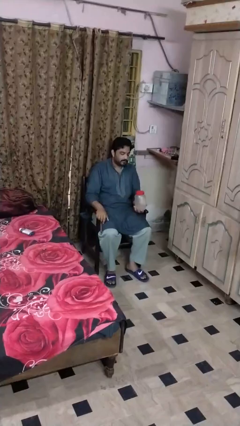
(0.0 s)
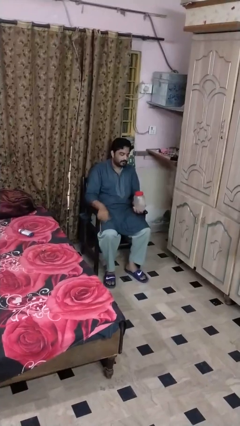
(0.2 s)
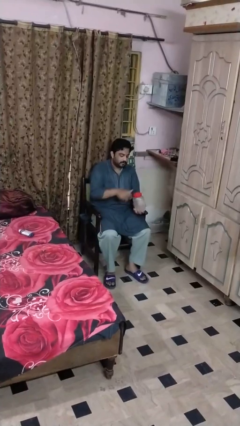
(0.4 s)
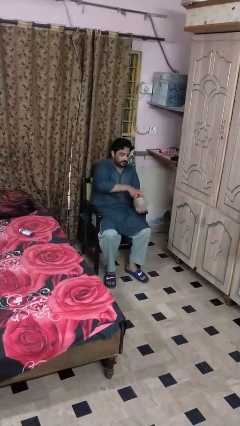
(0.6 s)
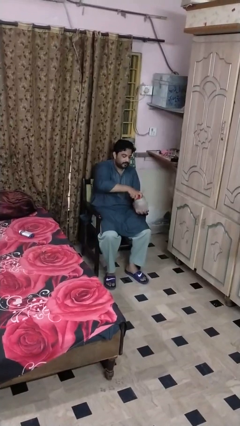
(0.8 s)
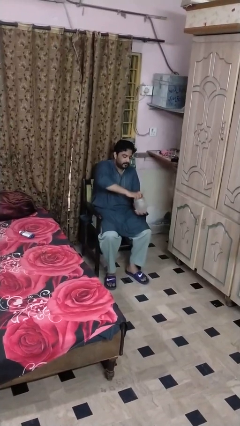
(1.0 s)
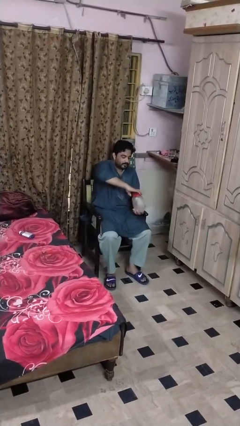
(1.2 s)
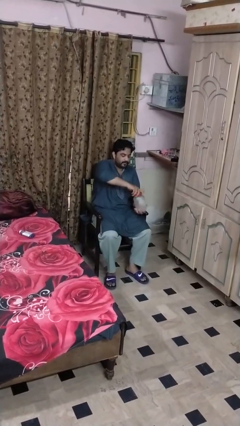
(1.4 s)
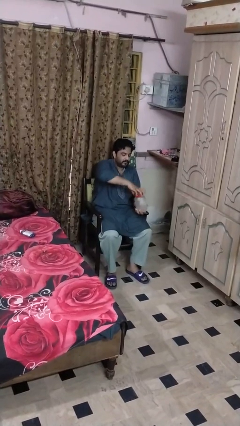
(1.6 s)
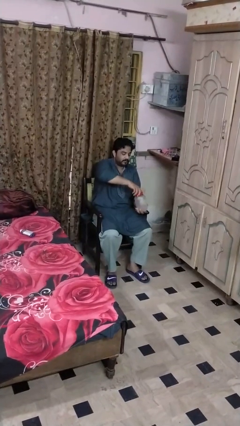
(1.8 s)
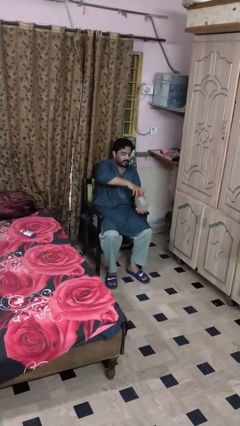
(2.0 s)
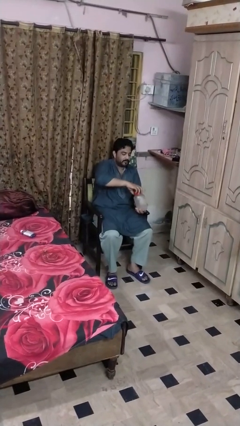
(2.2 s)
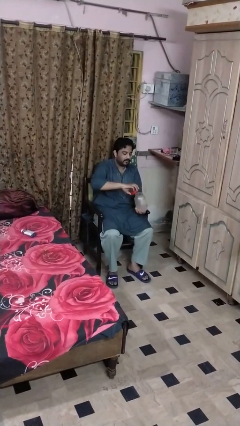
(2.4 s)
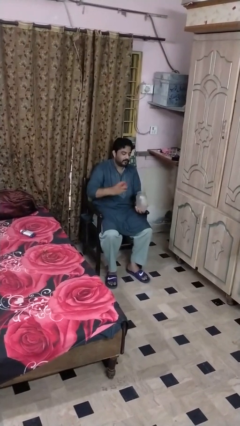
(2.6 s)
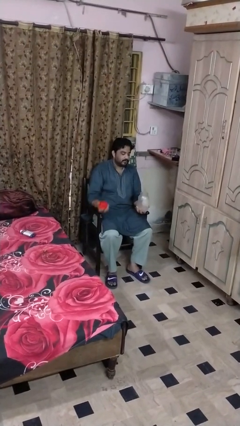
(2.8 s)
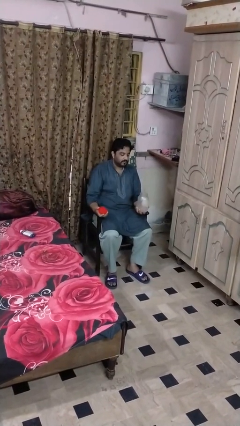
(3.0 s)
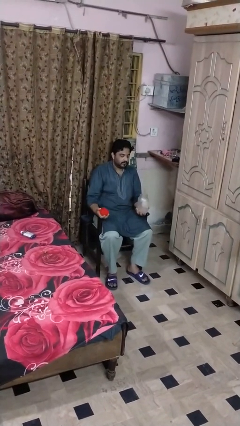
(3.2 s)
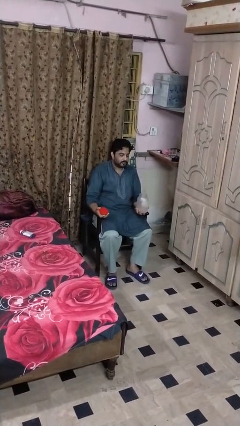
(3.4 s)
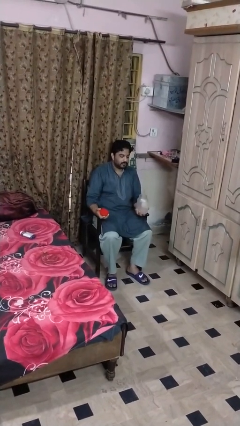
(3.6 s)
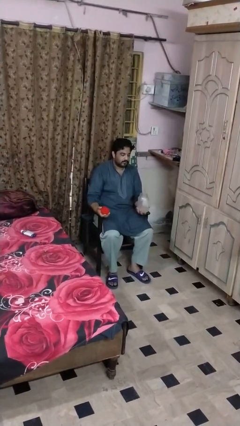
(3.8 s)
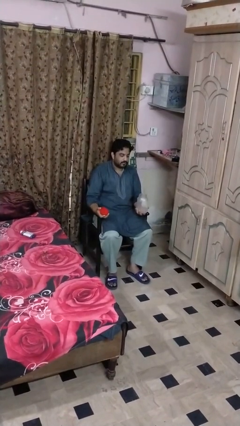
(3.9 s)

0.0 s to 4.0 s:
person opens jar

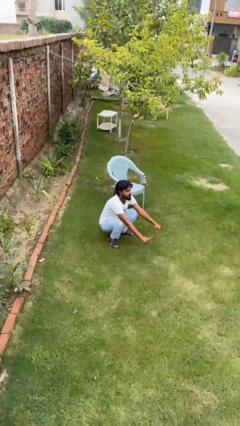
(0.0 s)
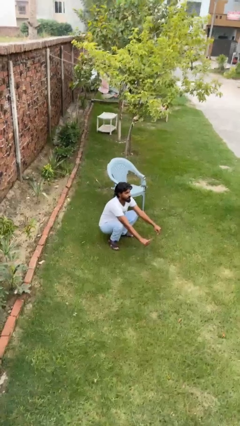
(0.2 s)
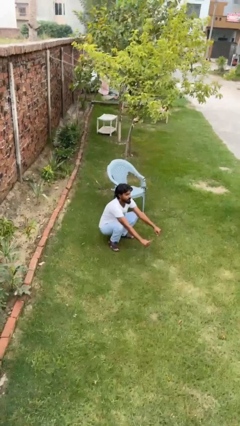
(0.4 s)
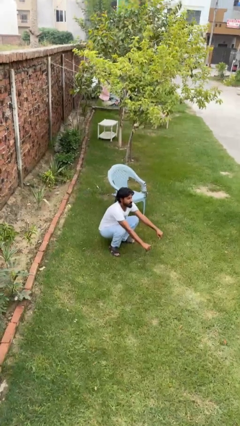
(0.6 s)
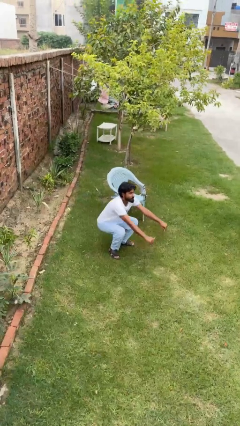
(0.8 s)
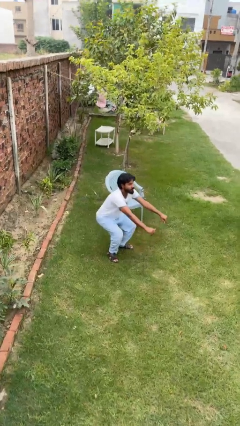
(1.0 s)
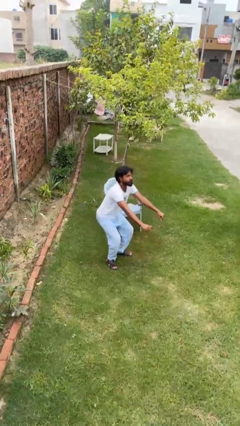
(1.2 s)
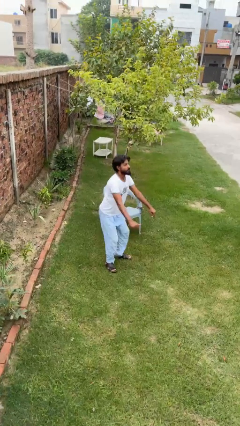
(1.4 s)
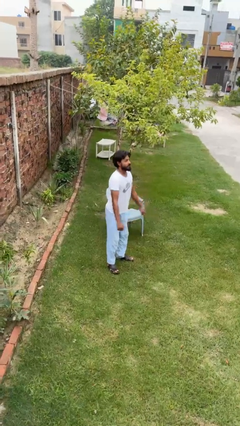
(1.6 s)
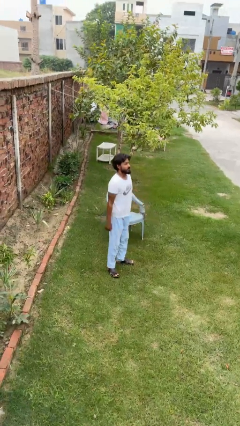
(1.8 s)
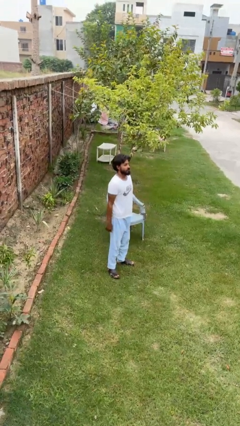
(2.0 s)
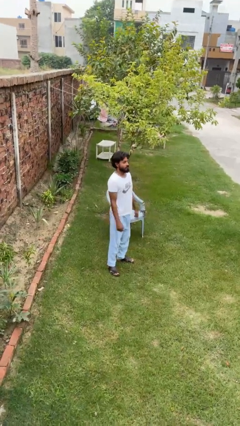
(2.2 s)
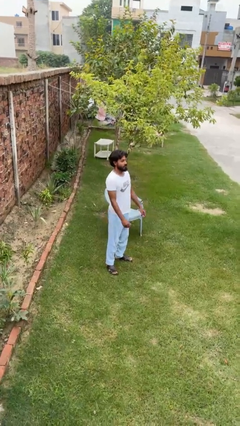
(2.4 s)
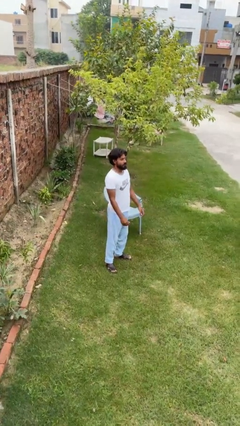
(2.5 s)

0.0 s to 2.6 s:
person stands up

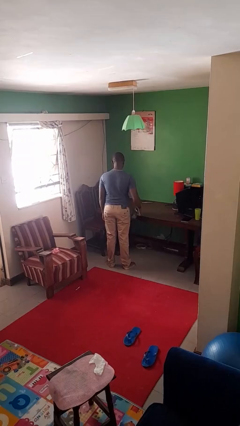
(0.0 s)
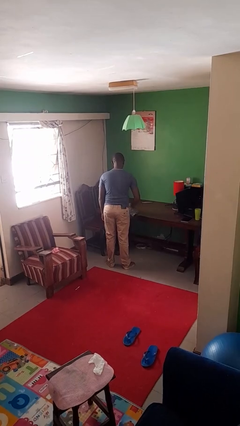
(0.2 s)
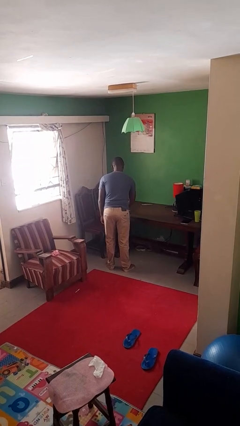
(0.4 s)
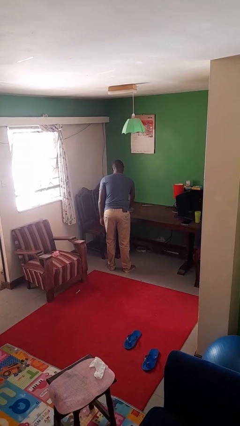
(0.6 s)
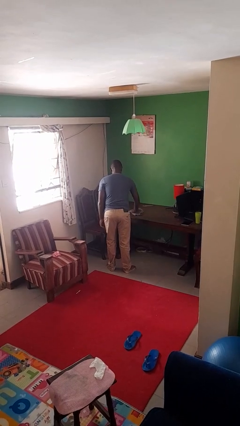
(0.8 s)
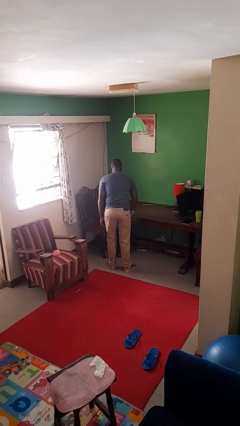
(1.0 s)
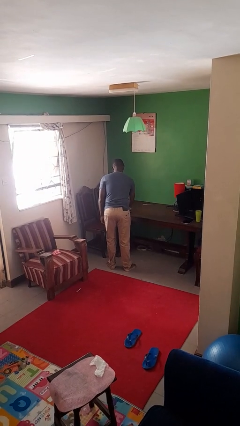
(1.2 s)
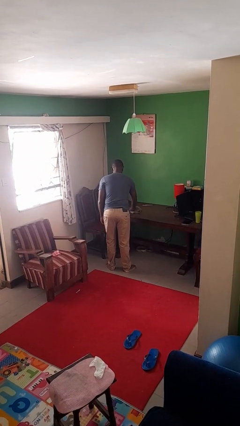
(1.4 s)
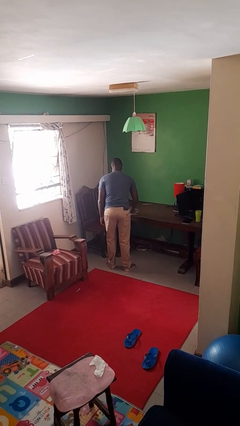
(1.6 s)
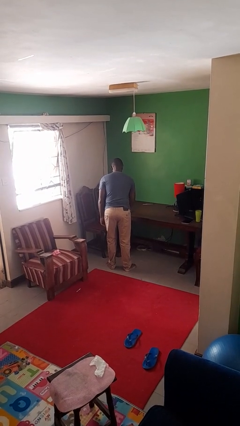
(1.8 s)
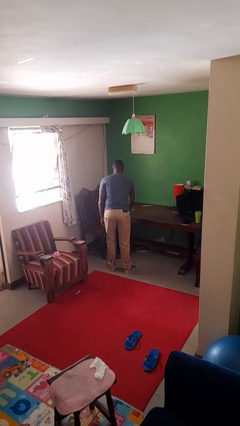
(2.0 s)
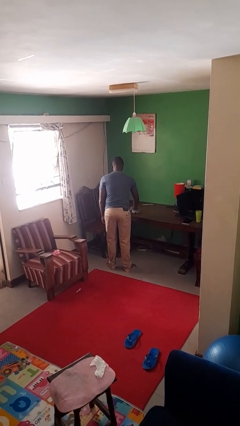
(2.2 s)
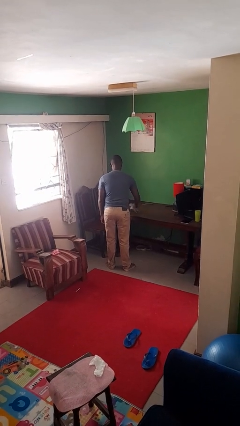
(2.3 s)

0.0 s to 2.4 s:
person cleans table with rag

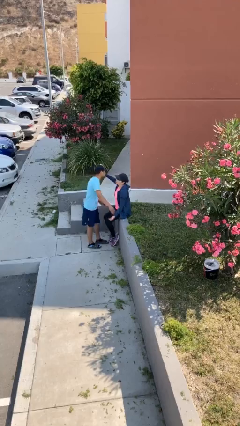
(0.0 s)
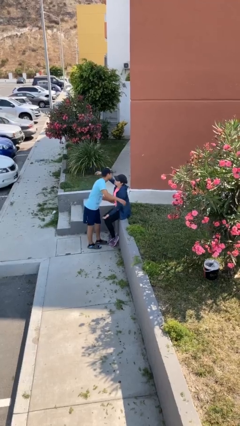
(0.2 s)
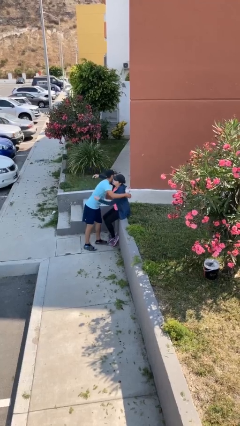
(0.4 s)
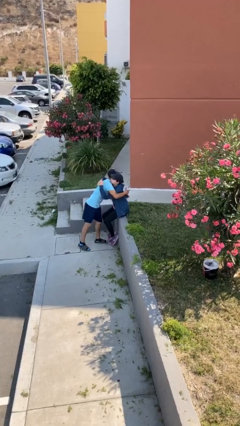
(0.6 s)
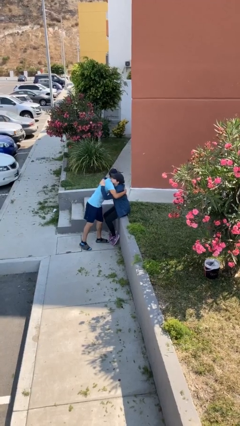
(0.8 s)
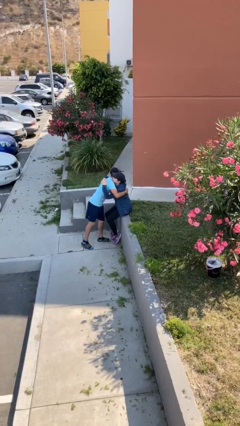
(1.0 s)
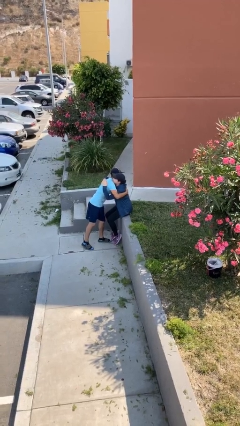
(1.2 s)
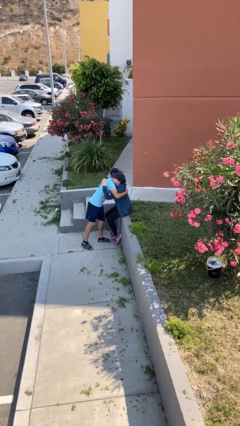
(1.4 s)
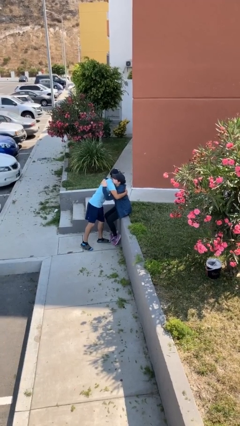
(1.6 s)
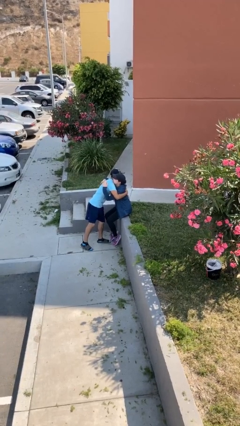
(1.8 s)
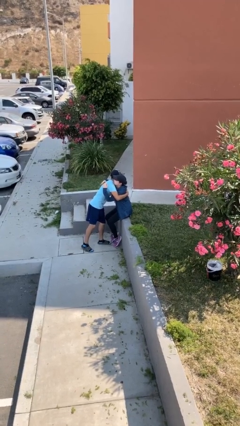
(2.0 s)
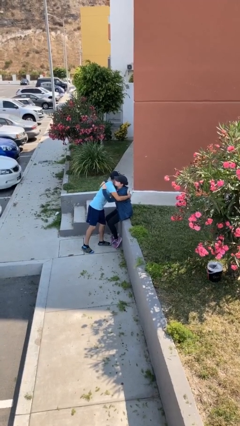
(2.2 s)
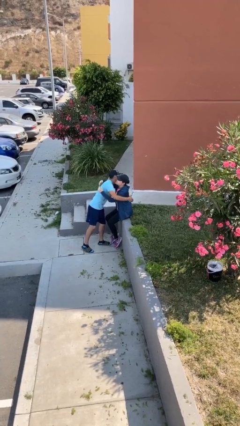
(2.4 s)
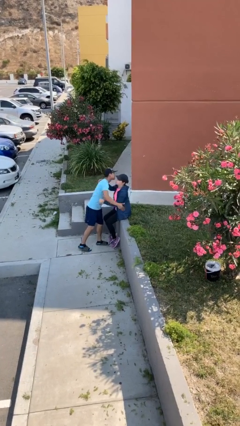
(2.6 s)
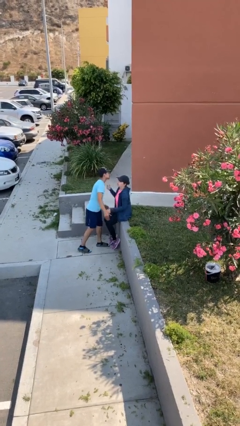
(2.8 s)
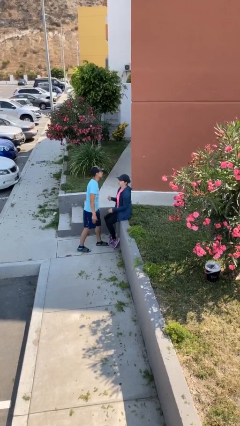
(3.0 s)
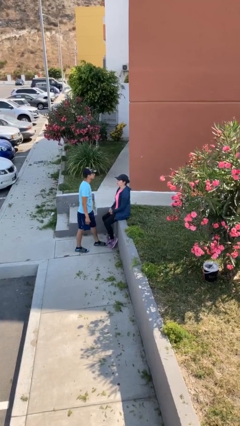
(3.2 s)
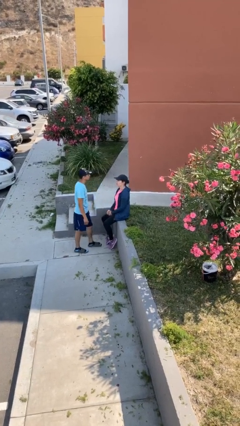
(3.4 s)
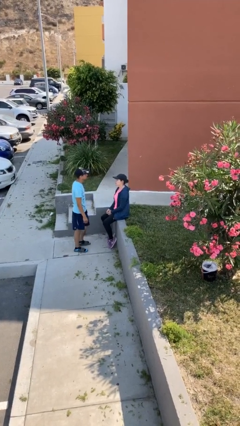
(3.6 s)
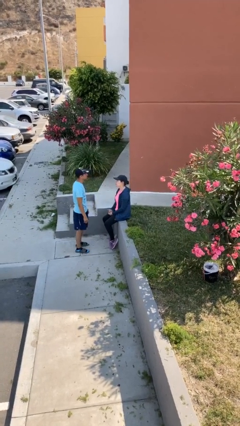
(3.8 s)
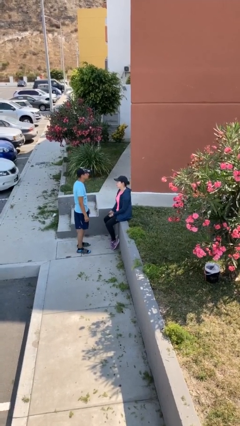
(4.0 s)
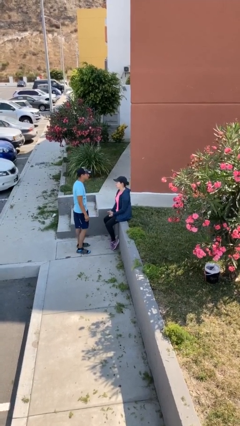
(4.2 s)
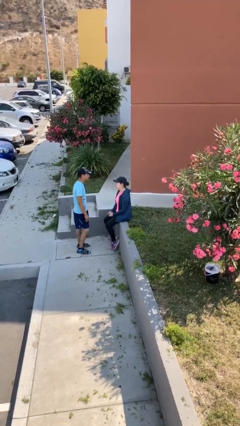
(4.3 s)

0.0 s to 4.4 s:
person embraces person

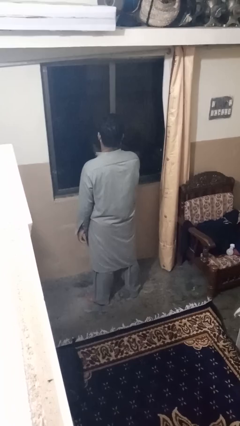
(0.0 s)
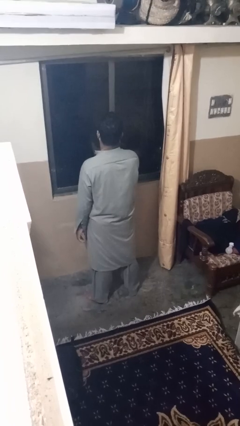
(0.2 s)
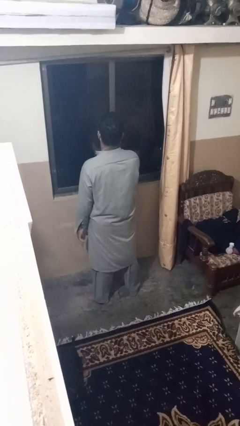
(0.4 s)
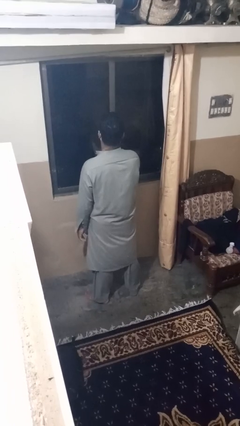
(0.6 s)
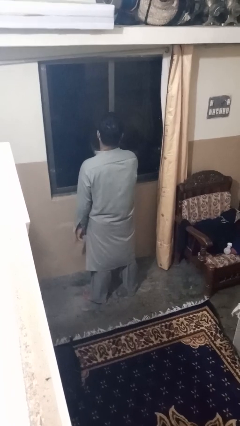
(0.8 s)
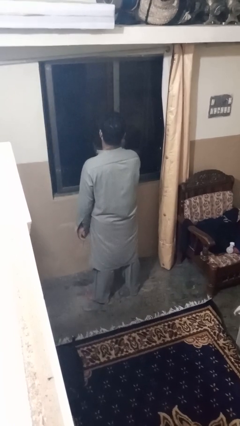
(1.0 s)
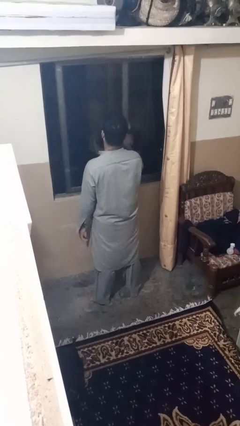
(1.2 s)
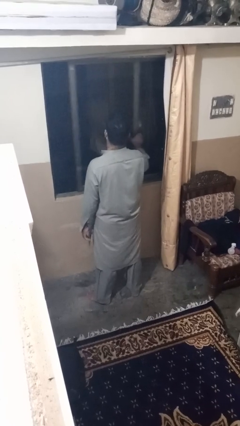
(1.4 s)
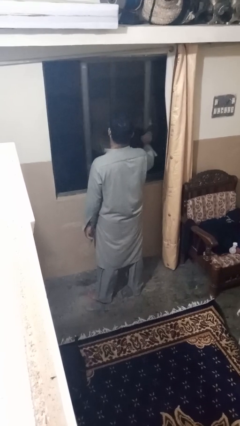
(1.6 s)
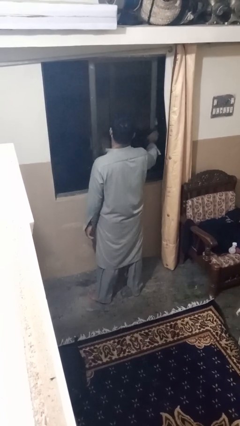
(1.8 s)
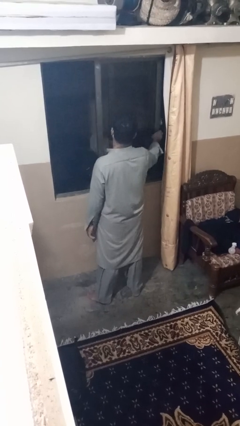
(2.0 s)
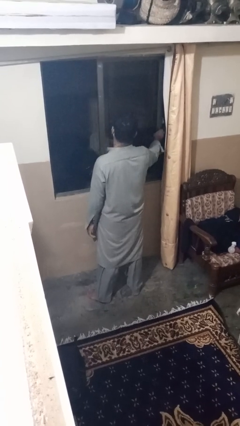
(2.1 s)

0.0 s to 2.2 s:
person opens home window

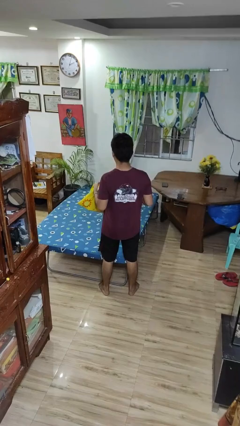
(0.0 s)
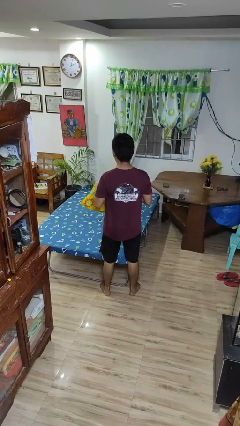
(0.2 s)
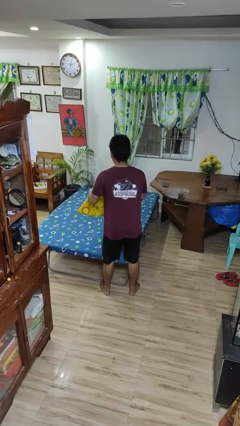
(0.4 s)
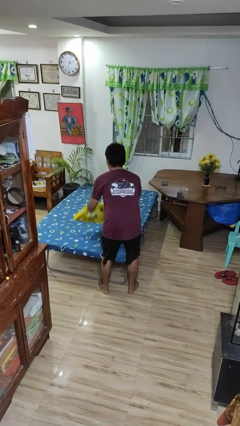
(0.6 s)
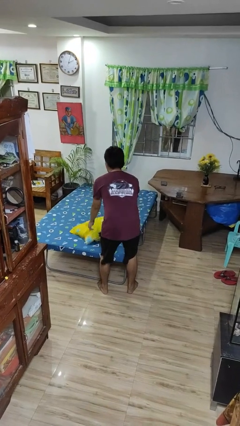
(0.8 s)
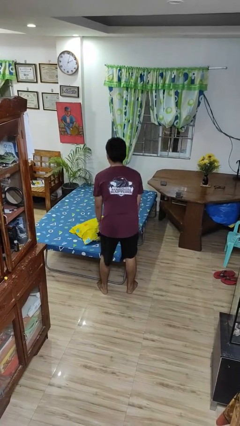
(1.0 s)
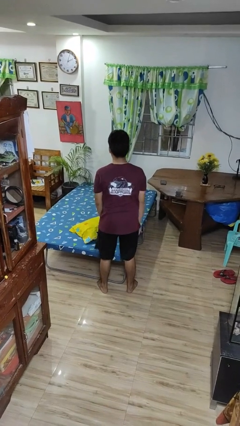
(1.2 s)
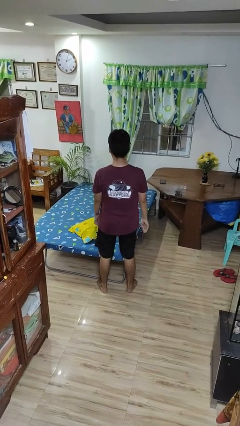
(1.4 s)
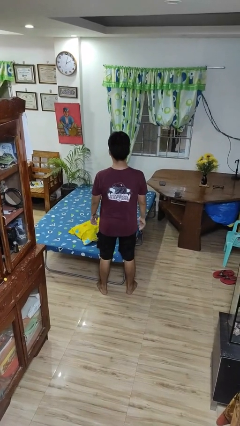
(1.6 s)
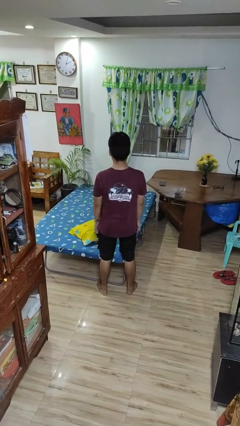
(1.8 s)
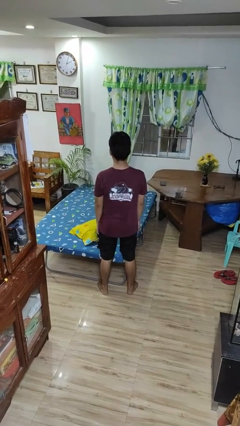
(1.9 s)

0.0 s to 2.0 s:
person puts down object on bed
